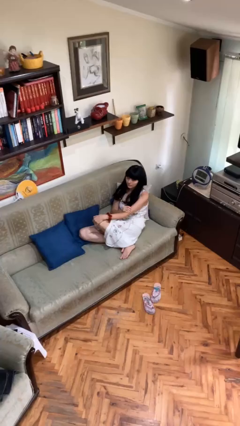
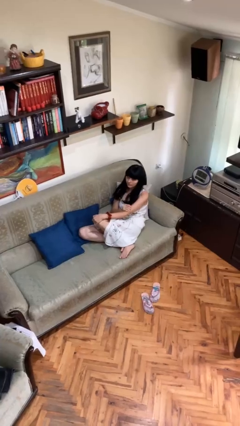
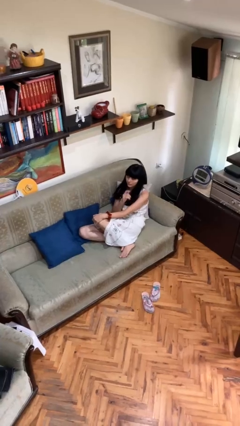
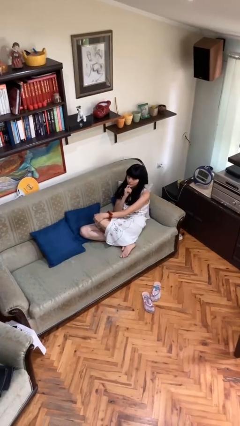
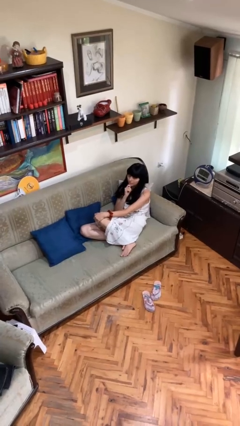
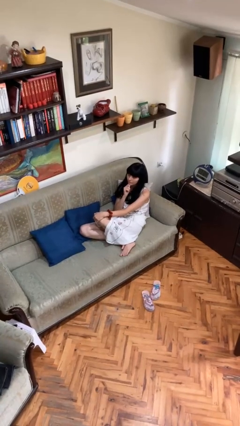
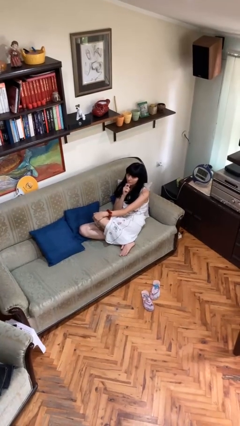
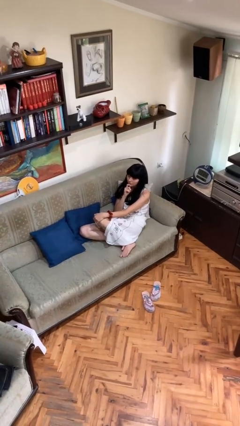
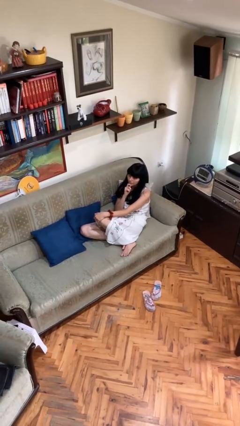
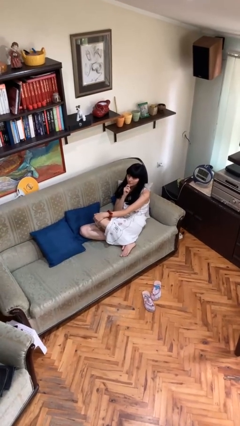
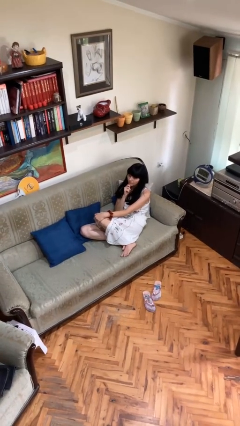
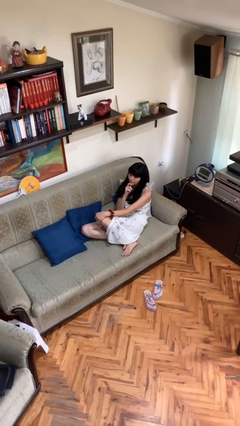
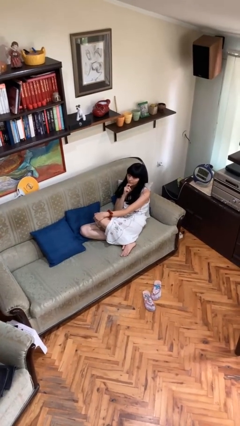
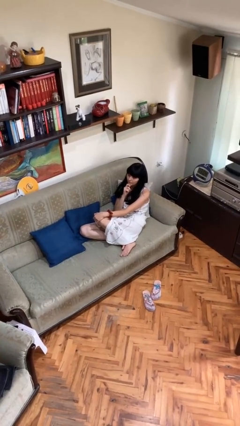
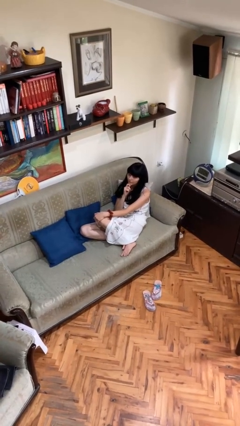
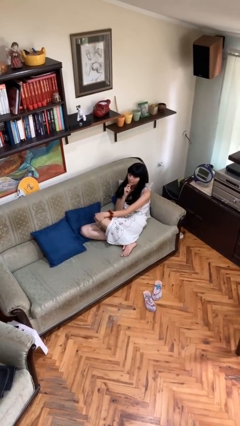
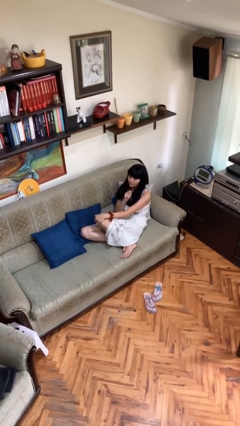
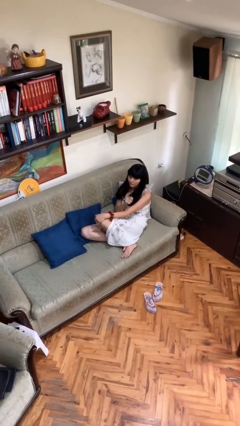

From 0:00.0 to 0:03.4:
person strokes chin

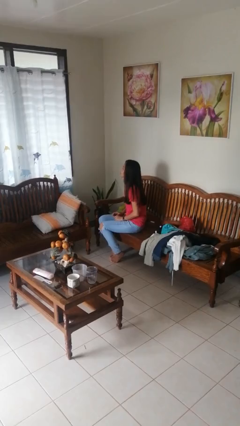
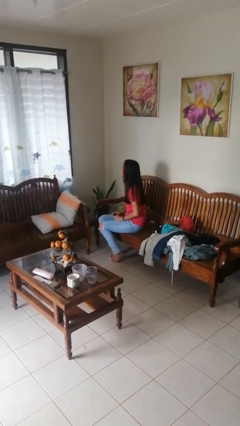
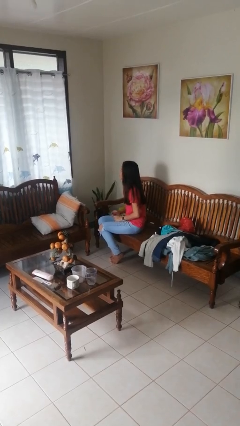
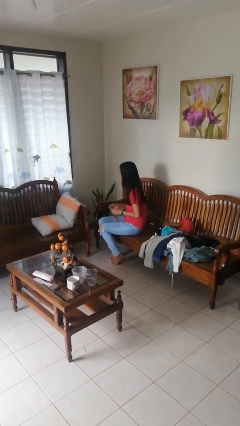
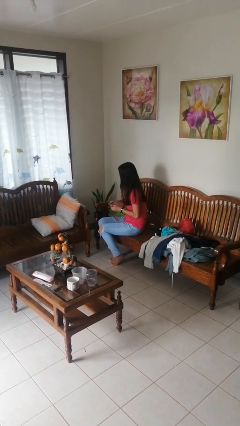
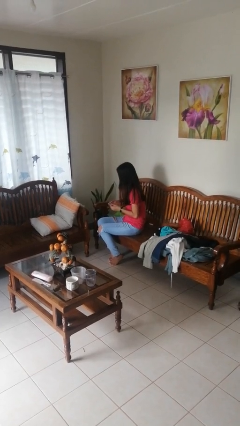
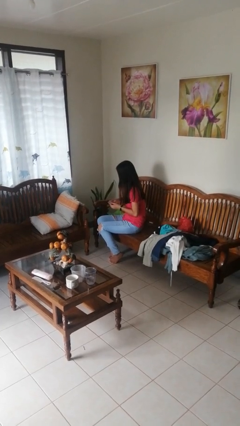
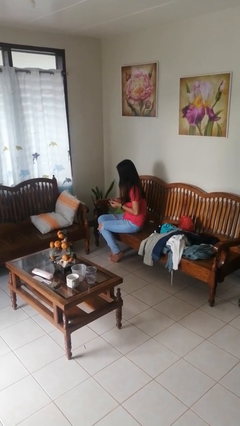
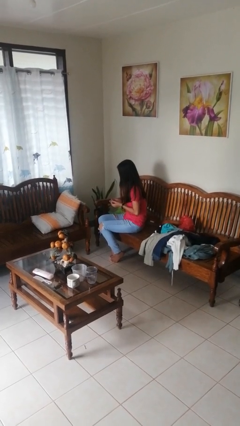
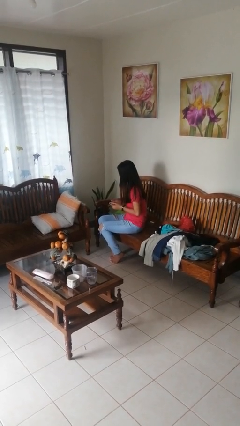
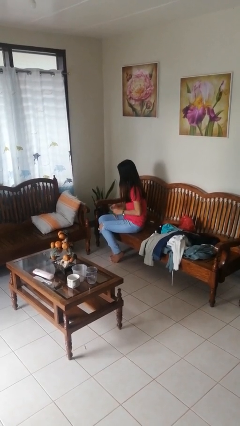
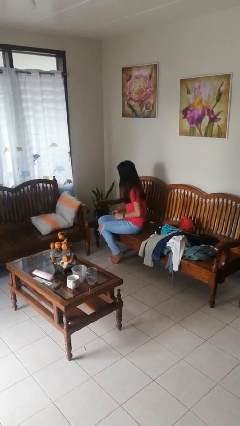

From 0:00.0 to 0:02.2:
person clips fingernails

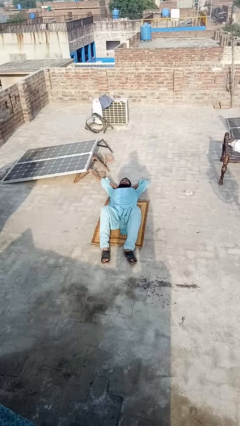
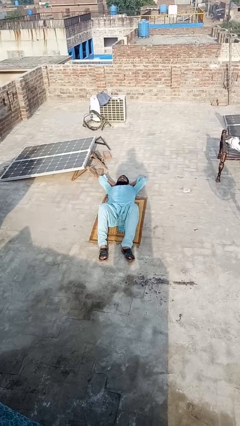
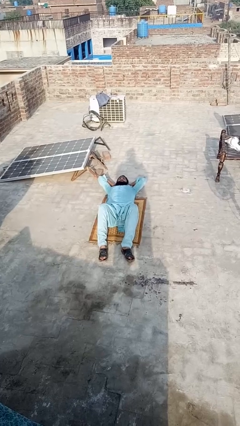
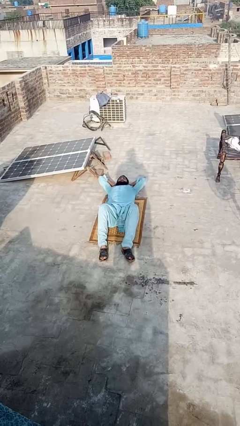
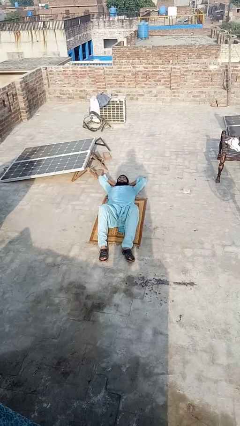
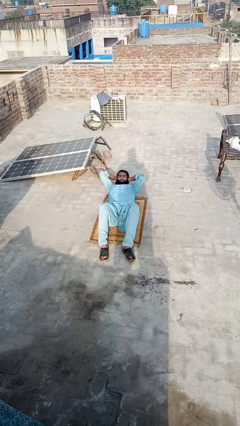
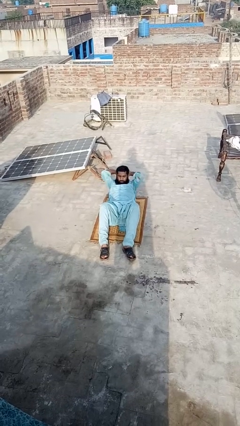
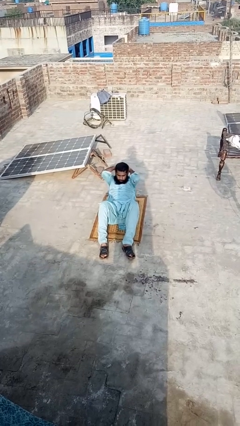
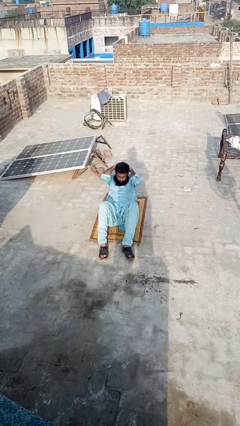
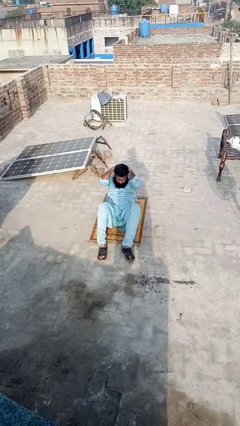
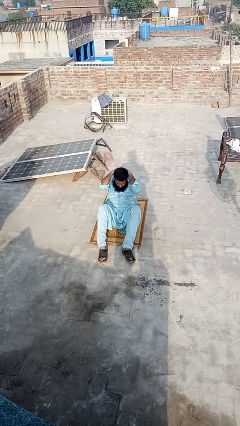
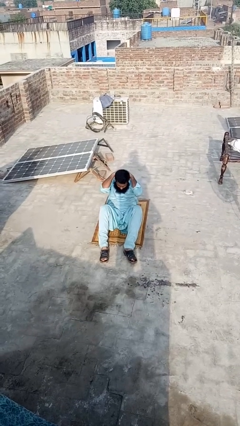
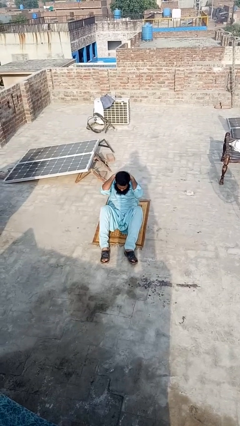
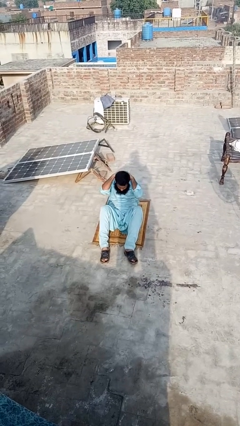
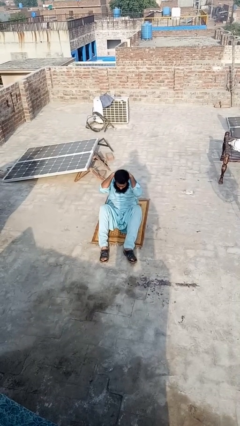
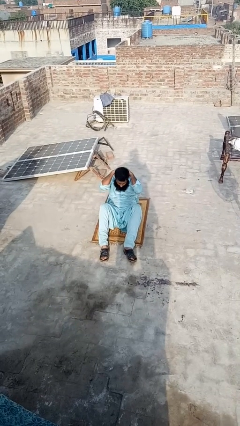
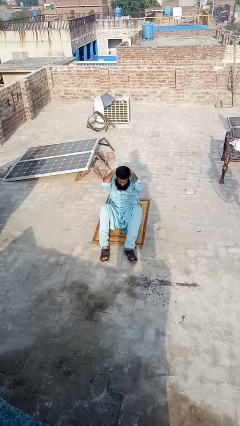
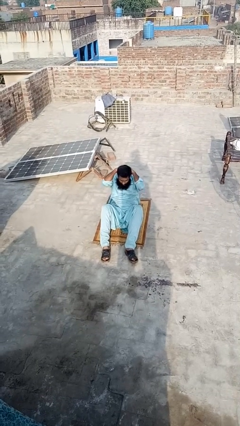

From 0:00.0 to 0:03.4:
person exercises with situp

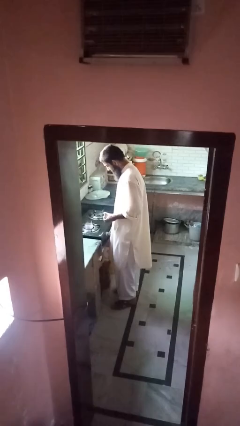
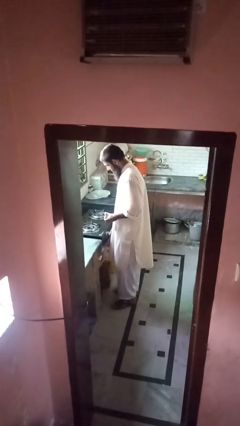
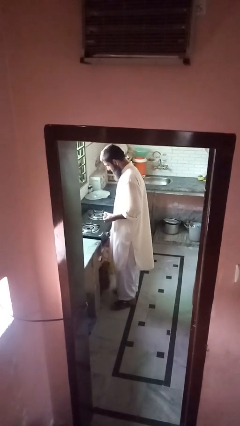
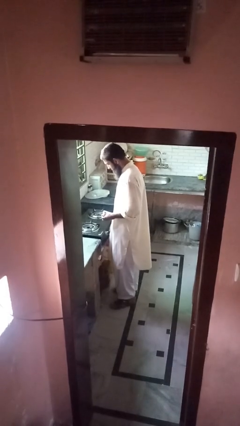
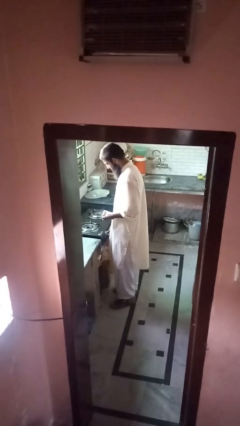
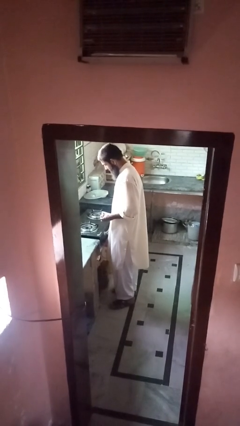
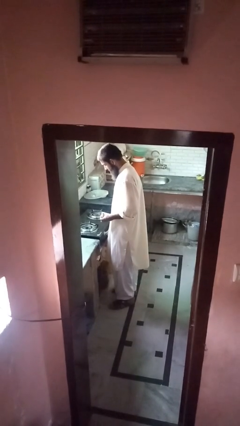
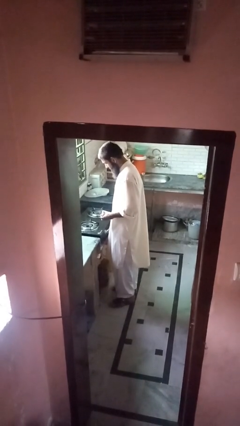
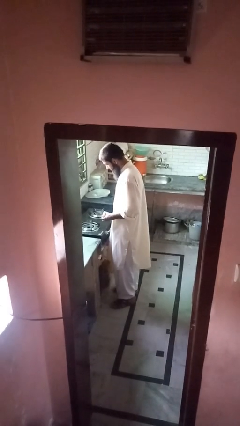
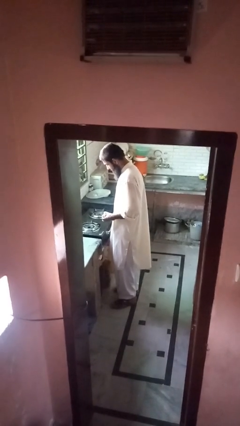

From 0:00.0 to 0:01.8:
person turns off stovetop

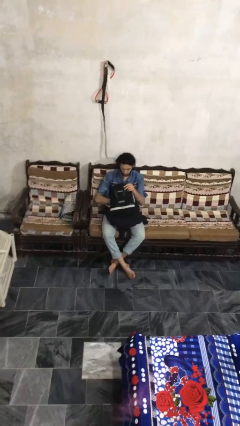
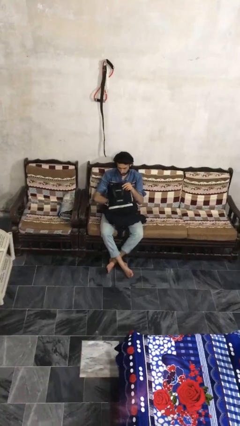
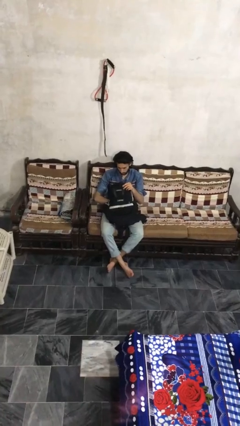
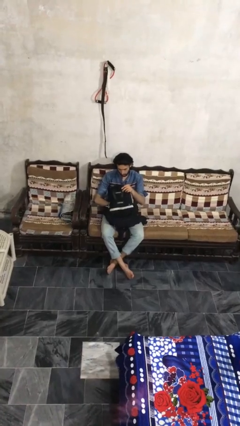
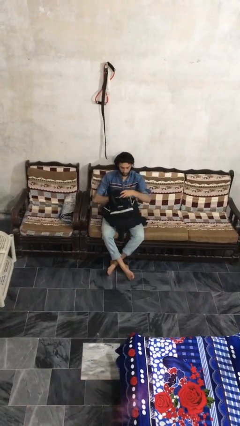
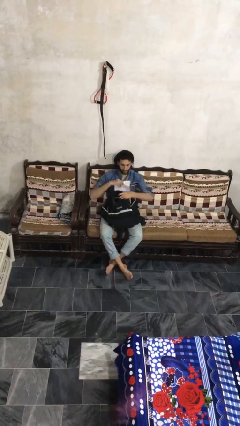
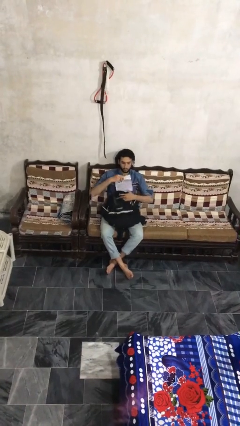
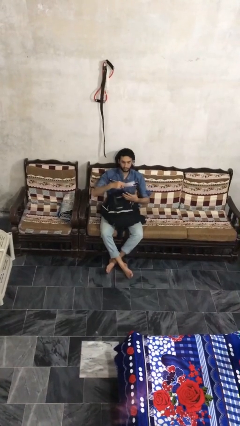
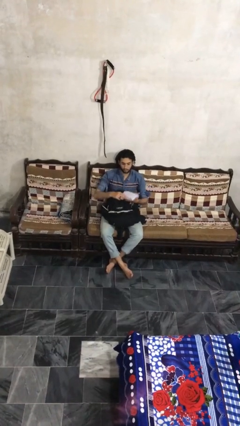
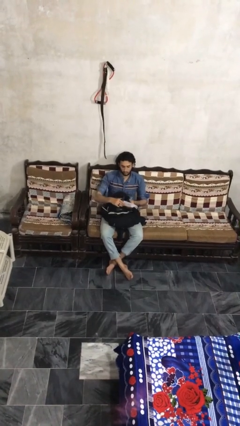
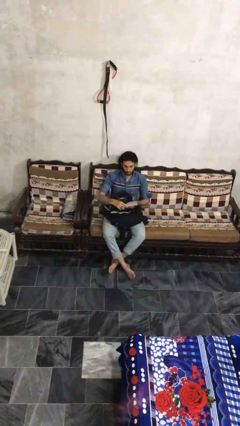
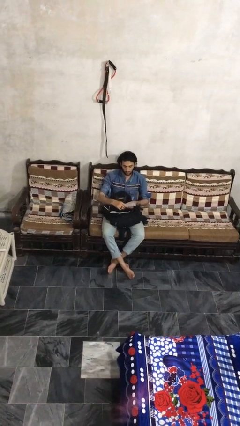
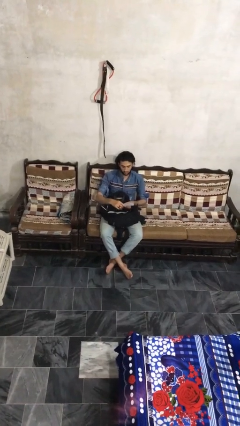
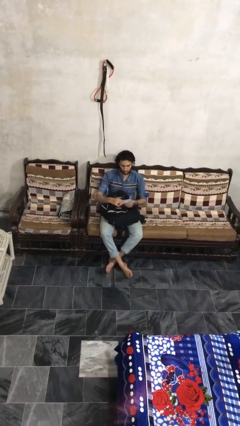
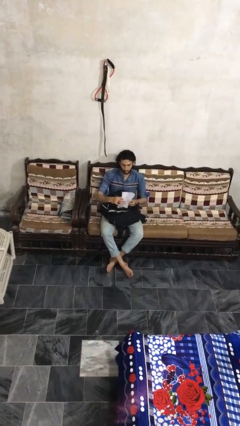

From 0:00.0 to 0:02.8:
person takes object from backpack

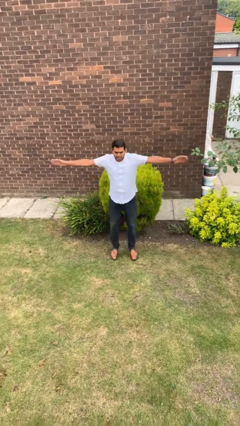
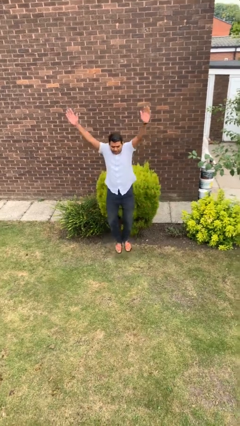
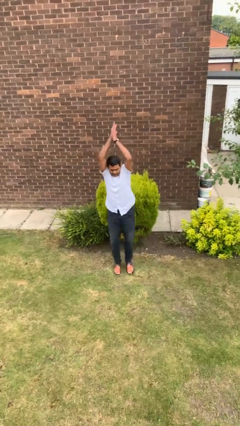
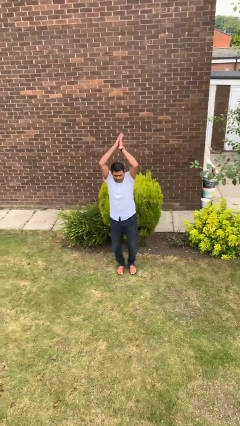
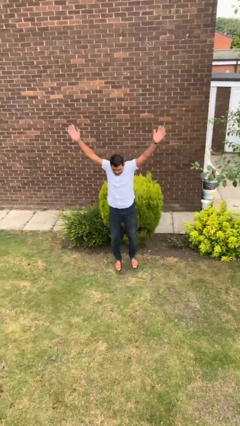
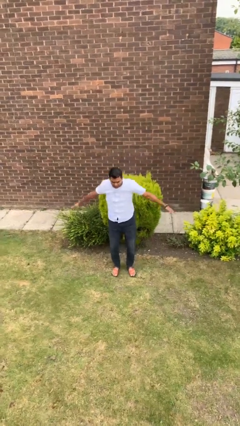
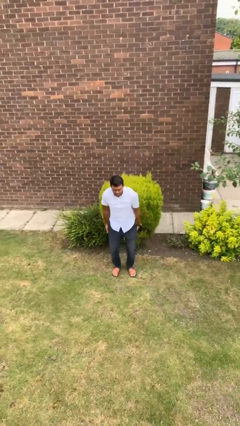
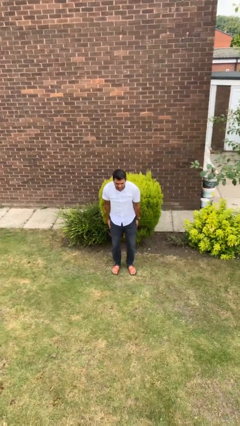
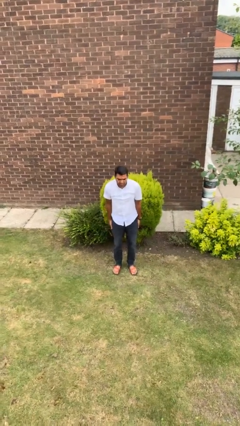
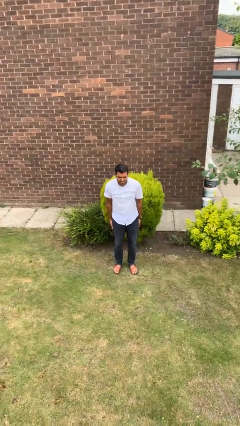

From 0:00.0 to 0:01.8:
person exercises with jumping jacks

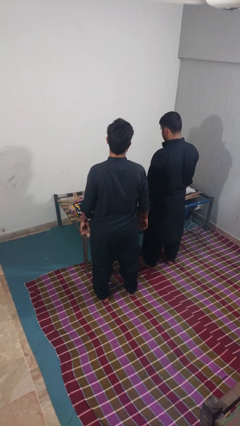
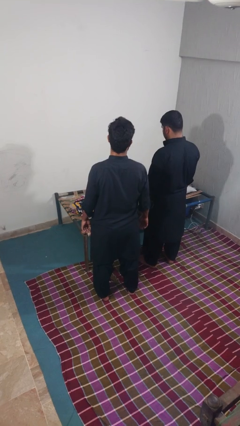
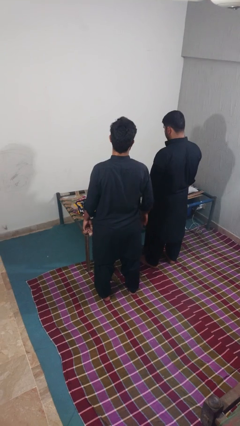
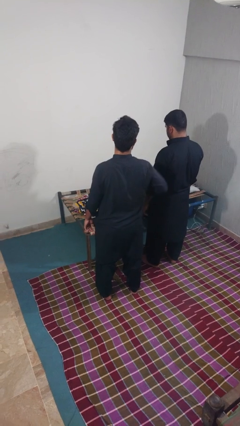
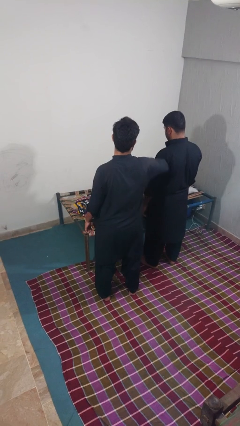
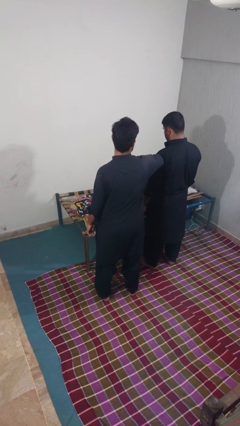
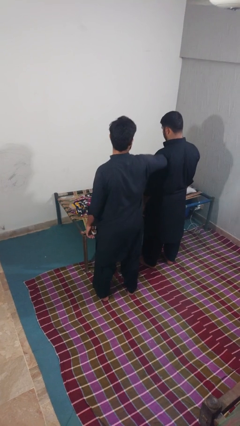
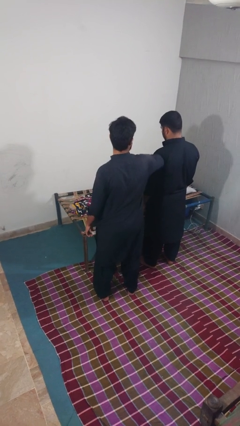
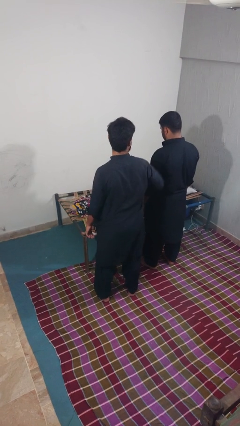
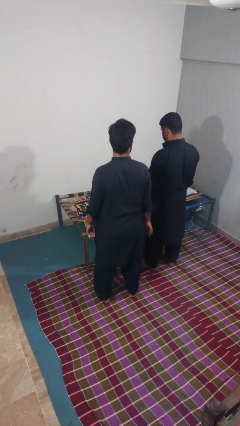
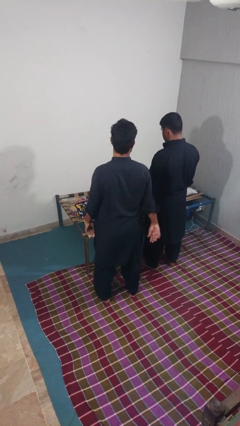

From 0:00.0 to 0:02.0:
person nudges person with elbow
